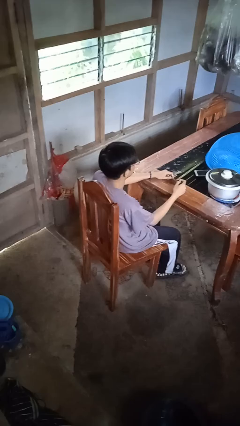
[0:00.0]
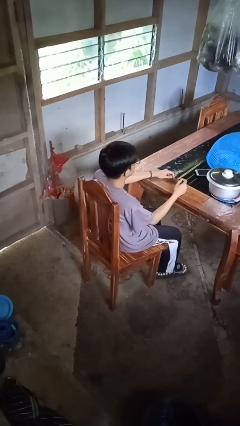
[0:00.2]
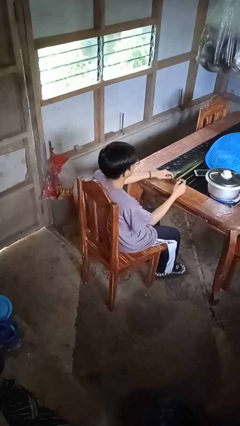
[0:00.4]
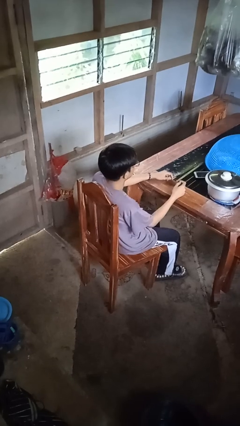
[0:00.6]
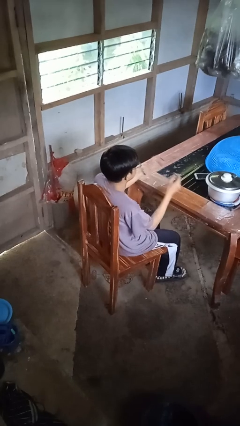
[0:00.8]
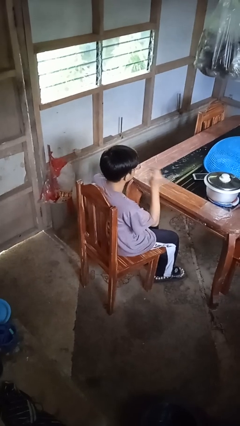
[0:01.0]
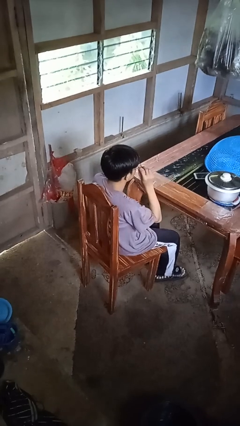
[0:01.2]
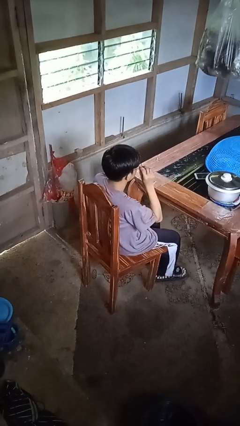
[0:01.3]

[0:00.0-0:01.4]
person takes off glasses

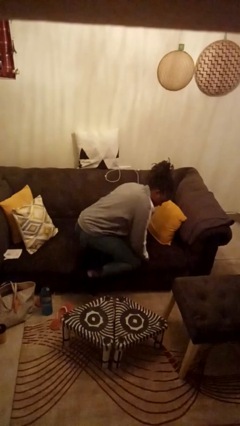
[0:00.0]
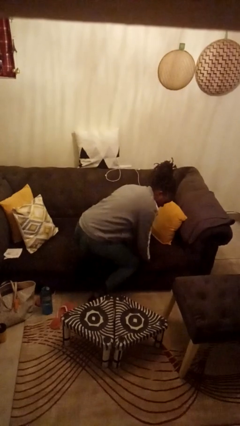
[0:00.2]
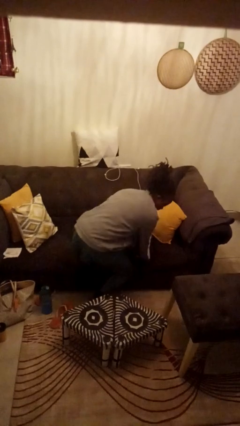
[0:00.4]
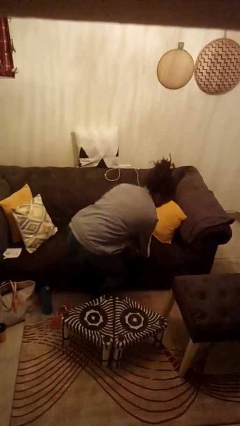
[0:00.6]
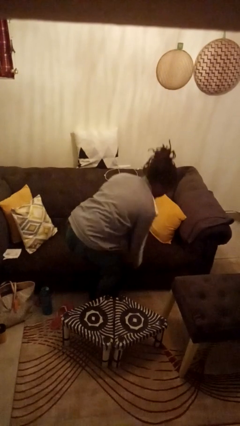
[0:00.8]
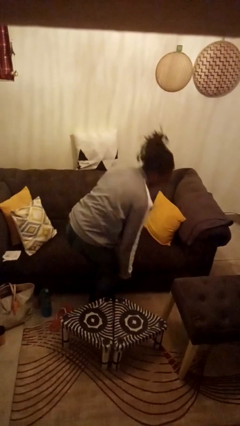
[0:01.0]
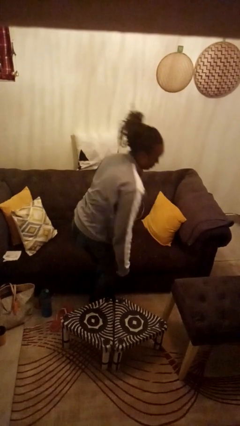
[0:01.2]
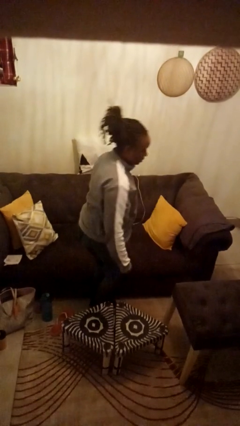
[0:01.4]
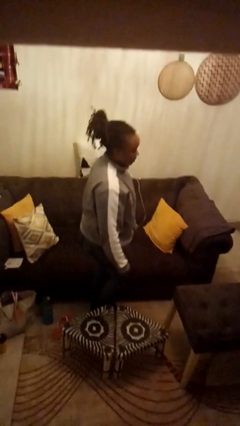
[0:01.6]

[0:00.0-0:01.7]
person climbs off couch

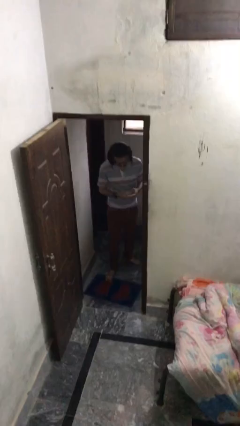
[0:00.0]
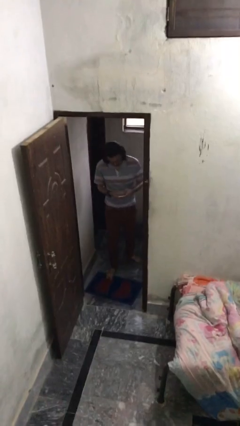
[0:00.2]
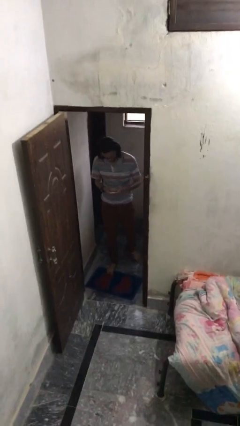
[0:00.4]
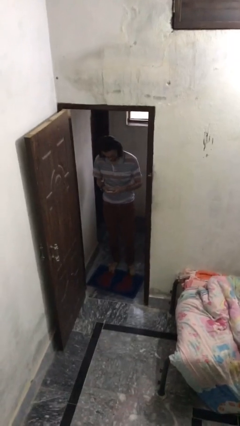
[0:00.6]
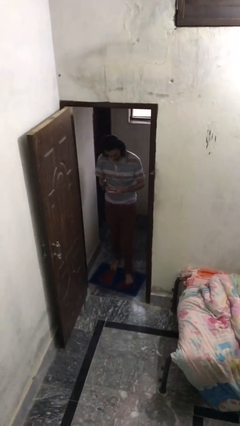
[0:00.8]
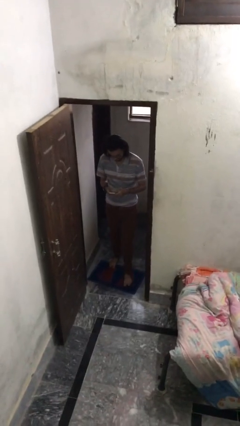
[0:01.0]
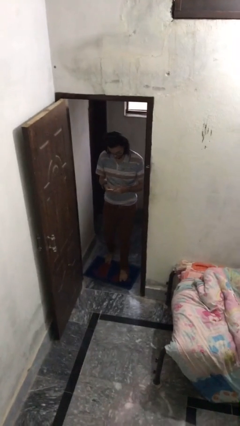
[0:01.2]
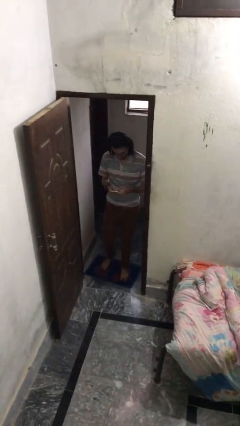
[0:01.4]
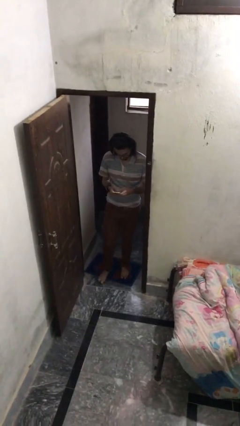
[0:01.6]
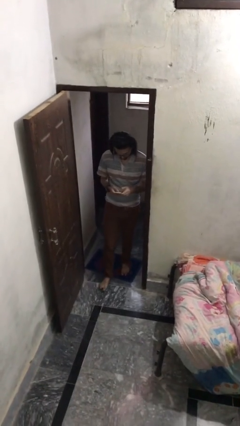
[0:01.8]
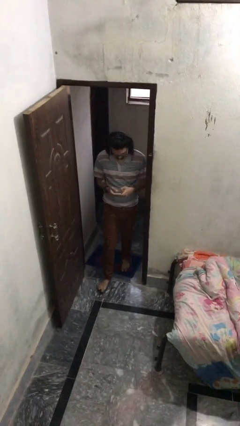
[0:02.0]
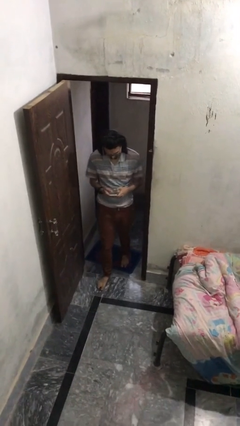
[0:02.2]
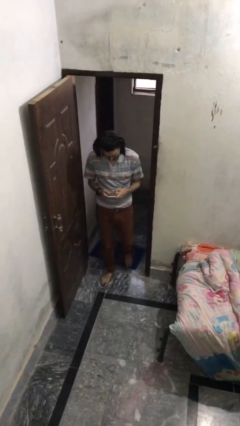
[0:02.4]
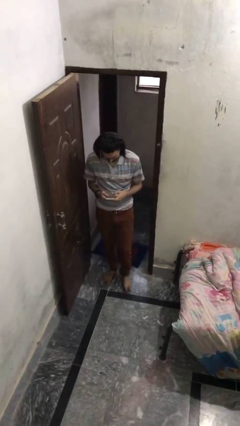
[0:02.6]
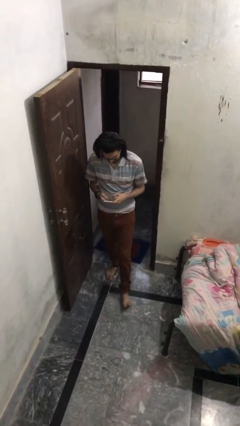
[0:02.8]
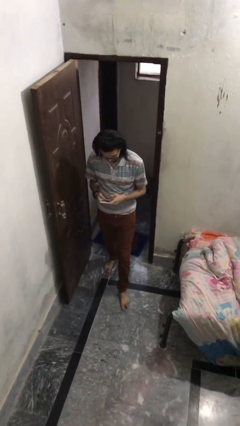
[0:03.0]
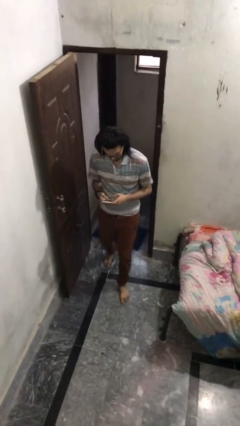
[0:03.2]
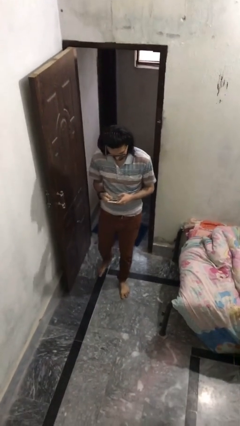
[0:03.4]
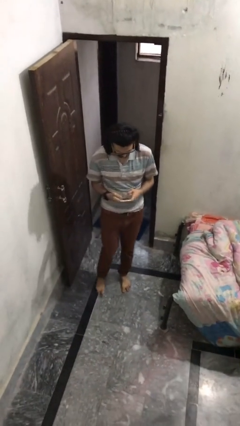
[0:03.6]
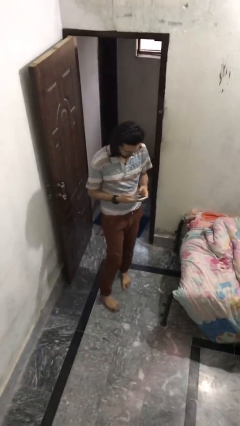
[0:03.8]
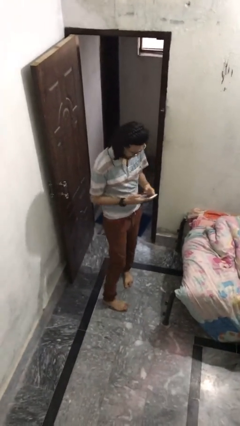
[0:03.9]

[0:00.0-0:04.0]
person enters scene through structure

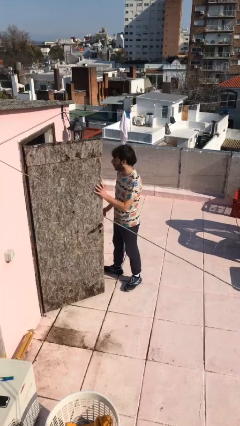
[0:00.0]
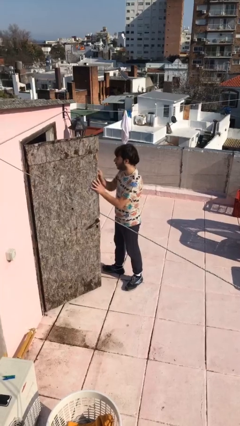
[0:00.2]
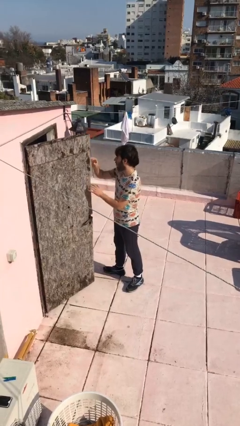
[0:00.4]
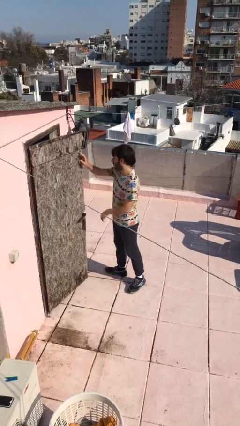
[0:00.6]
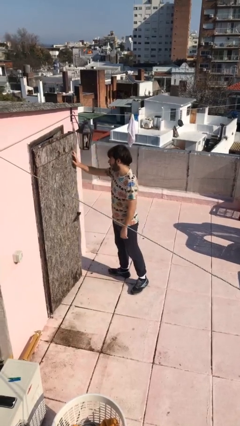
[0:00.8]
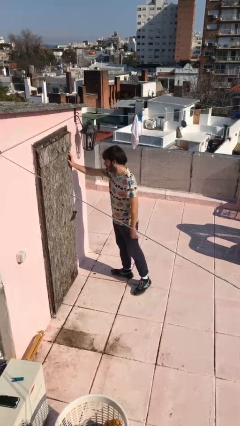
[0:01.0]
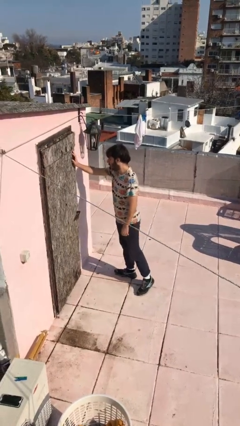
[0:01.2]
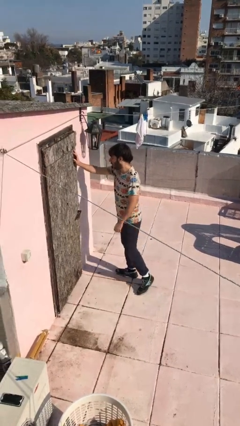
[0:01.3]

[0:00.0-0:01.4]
person closes facility door

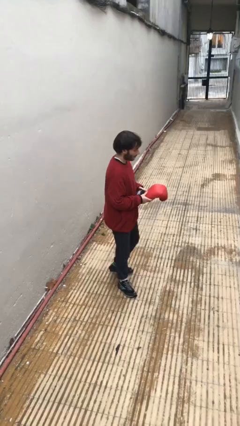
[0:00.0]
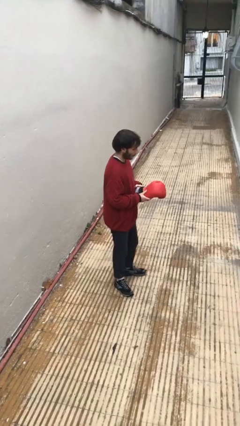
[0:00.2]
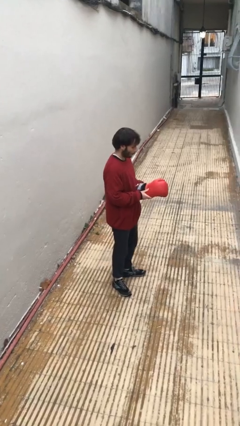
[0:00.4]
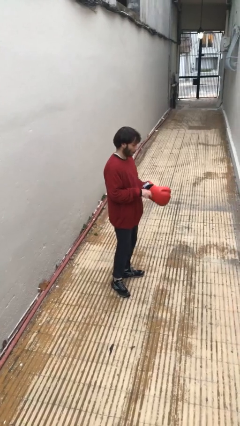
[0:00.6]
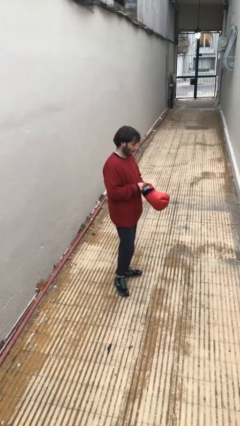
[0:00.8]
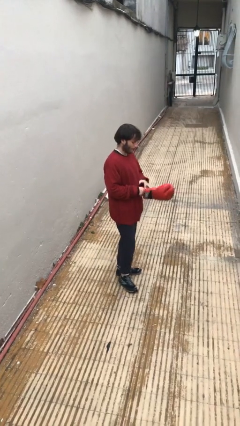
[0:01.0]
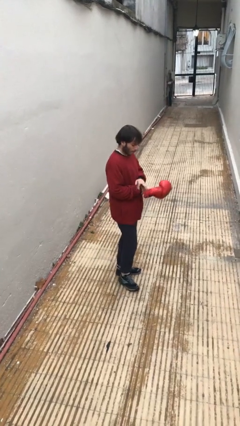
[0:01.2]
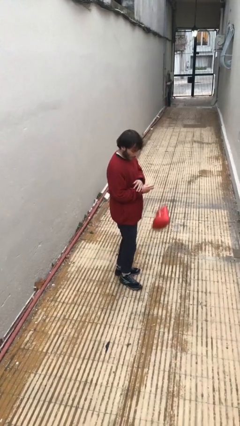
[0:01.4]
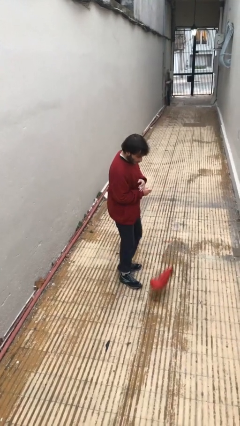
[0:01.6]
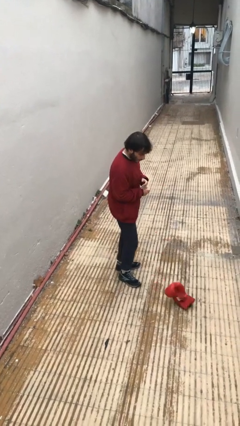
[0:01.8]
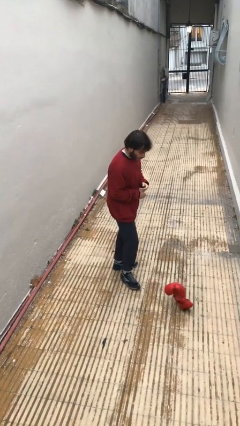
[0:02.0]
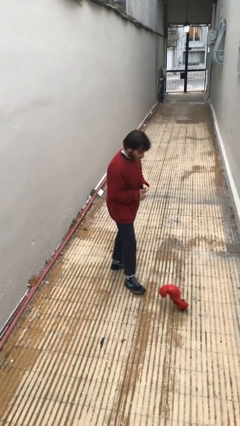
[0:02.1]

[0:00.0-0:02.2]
person drops object

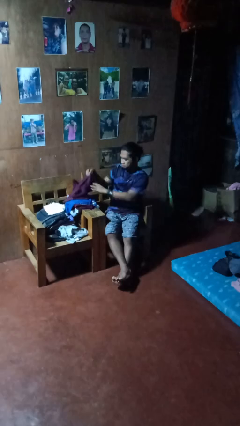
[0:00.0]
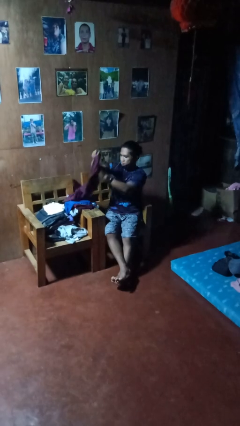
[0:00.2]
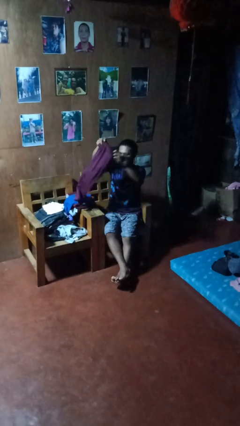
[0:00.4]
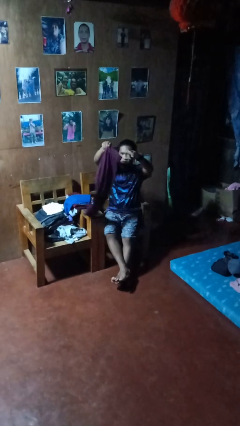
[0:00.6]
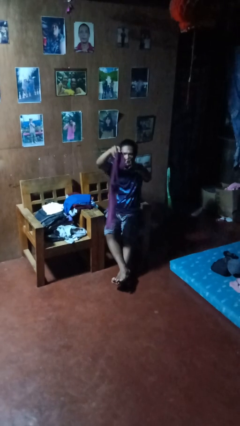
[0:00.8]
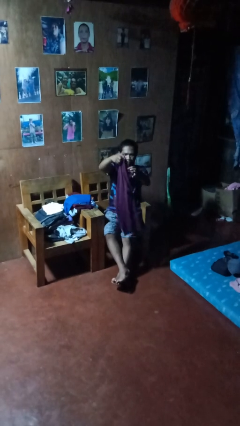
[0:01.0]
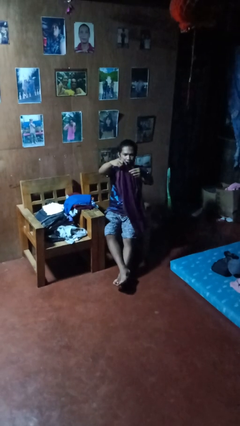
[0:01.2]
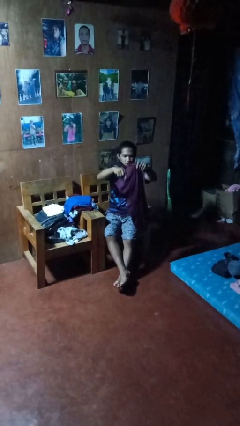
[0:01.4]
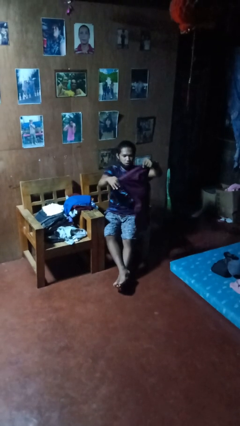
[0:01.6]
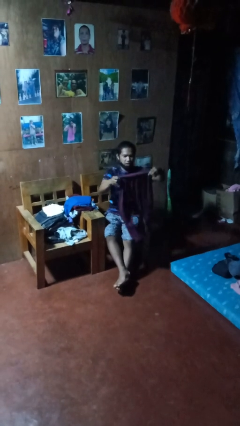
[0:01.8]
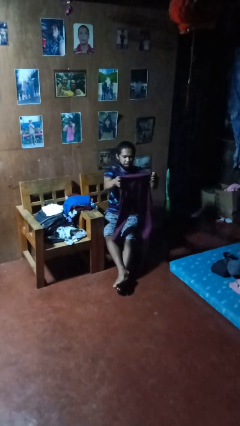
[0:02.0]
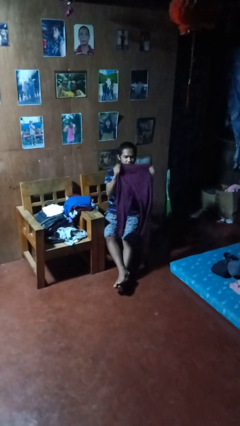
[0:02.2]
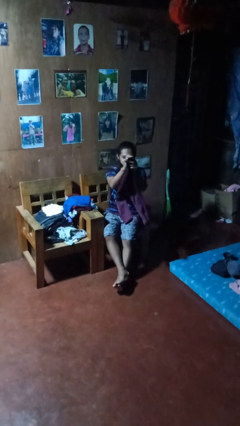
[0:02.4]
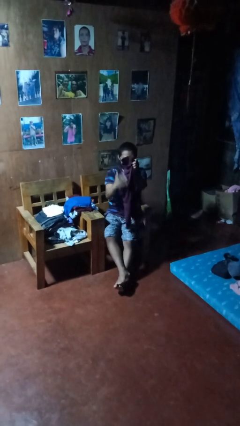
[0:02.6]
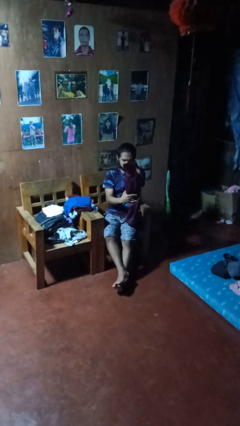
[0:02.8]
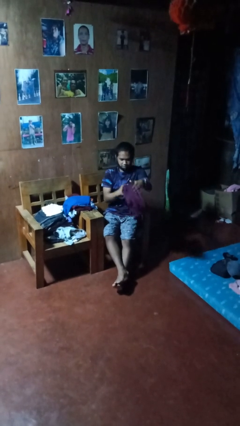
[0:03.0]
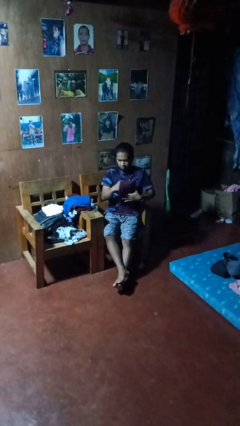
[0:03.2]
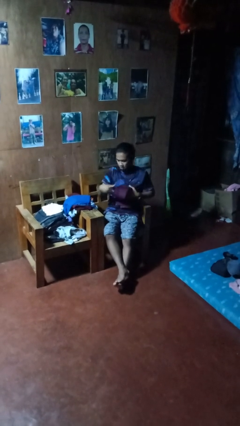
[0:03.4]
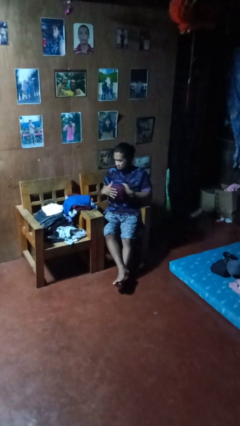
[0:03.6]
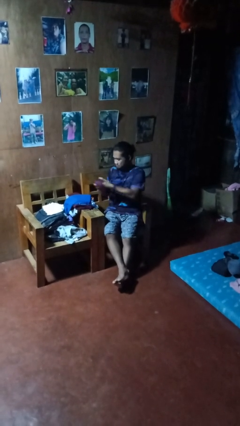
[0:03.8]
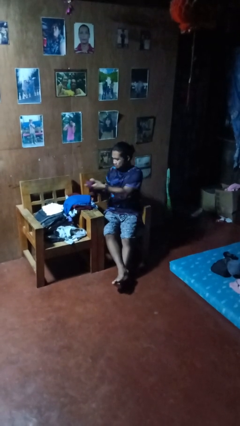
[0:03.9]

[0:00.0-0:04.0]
person folds pants

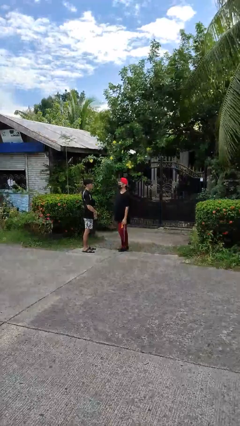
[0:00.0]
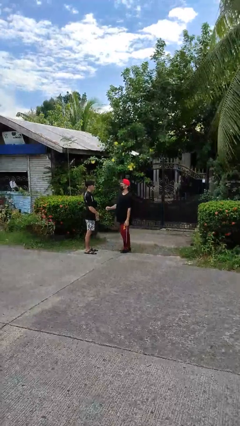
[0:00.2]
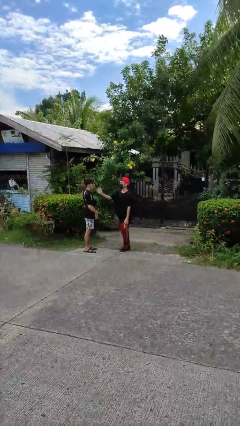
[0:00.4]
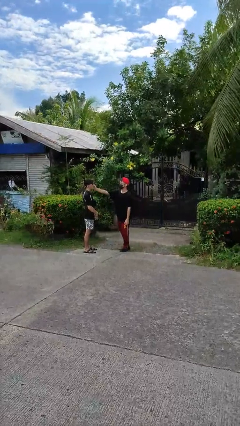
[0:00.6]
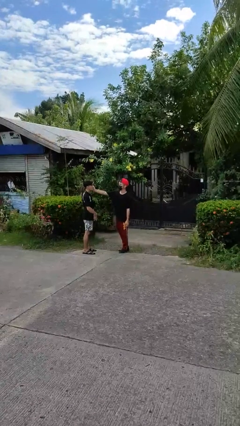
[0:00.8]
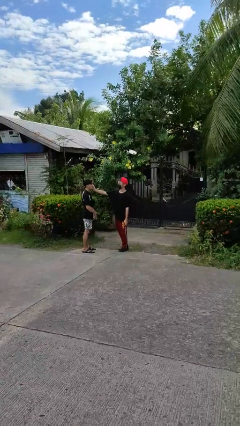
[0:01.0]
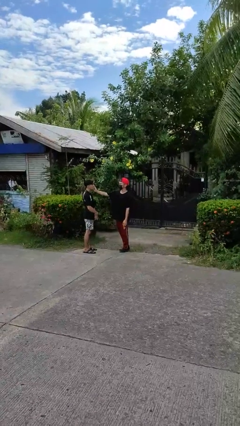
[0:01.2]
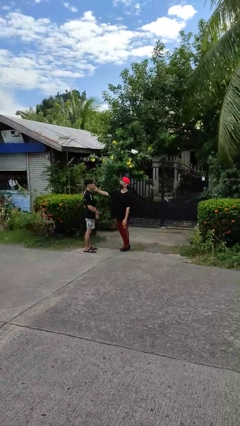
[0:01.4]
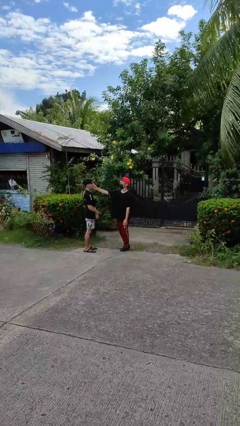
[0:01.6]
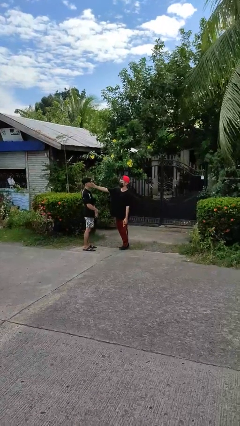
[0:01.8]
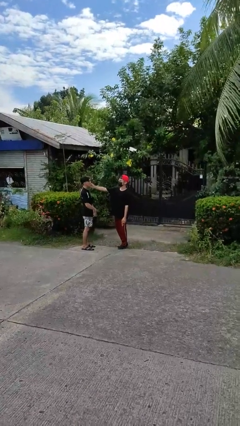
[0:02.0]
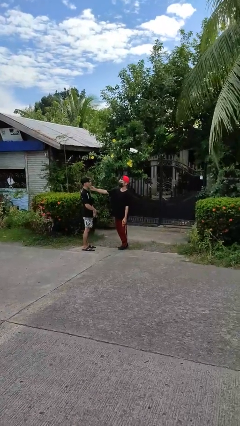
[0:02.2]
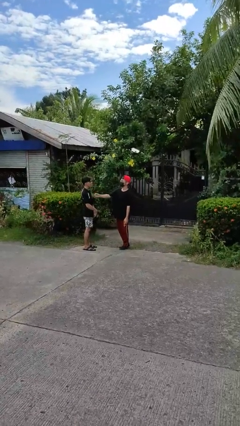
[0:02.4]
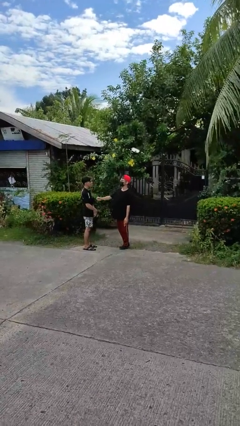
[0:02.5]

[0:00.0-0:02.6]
person touches face of person
